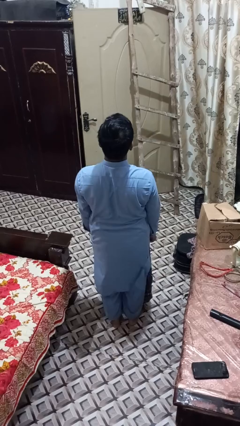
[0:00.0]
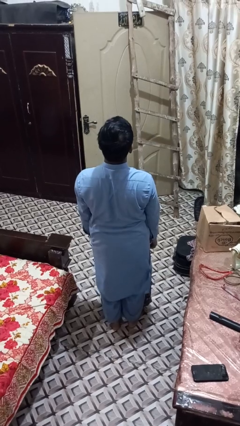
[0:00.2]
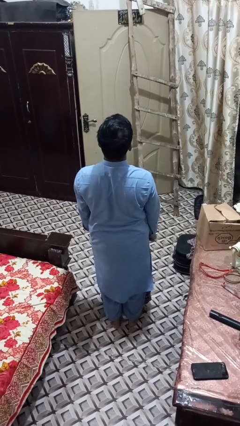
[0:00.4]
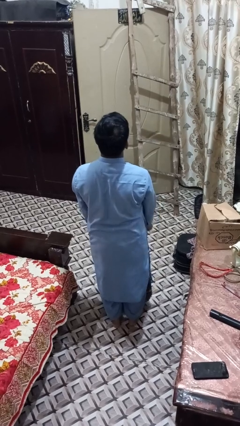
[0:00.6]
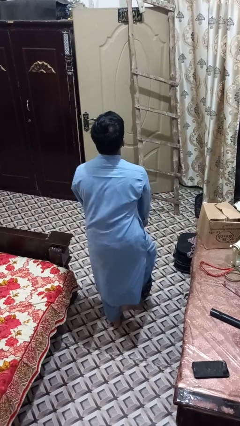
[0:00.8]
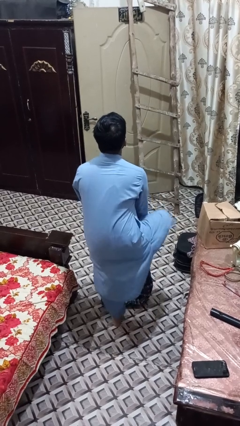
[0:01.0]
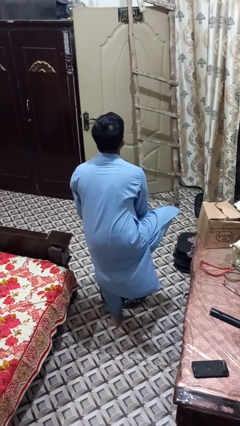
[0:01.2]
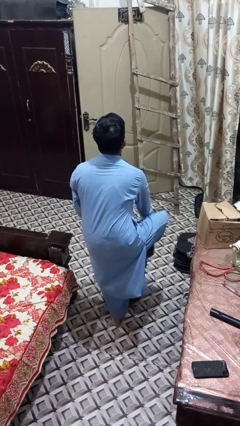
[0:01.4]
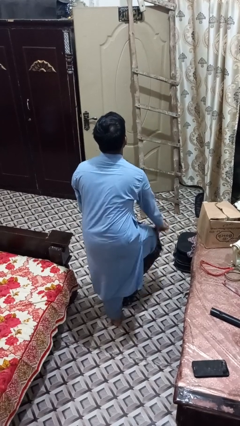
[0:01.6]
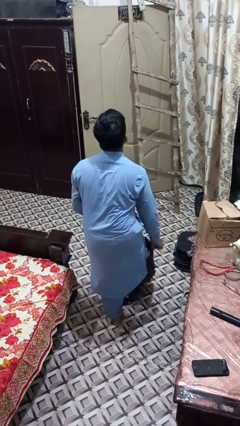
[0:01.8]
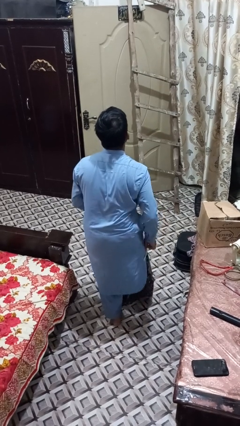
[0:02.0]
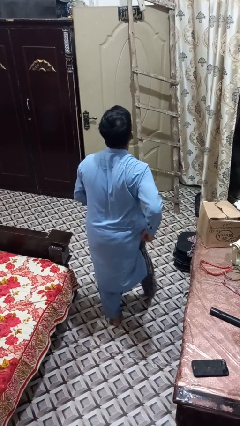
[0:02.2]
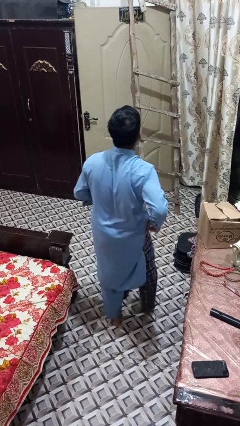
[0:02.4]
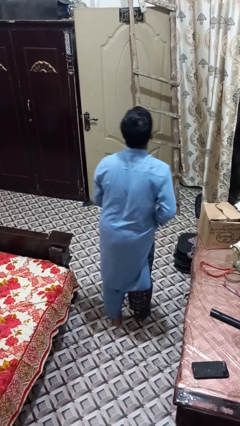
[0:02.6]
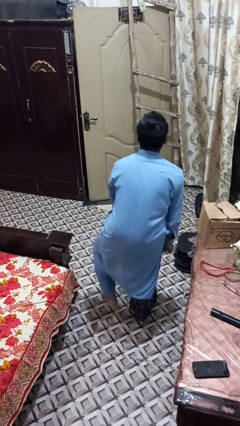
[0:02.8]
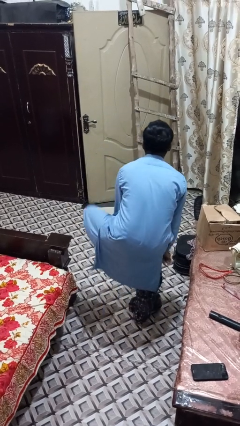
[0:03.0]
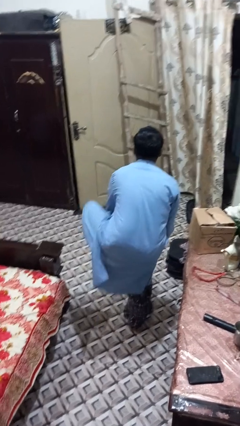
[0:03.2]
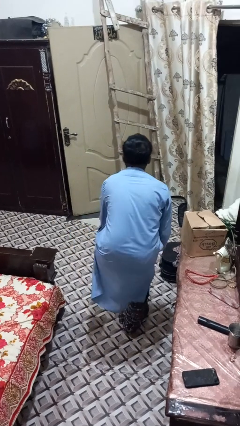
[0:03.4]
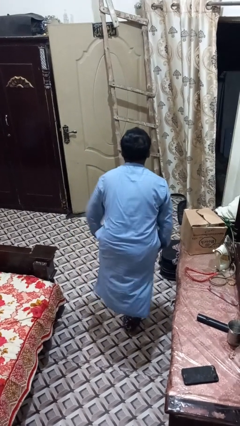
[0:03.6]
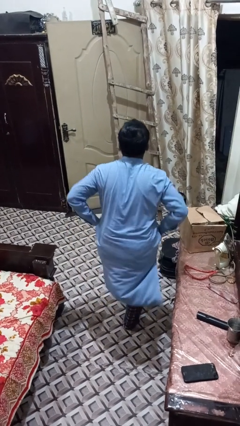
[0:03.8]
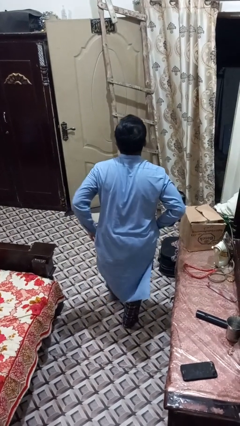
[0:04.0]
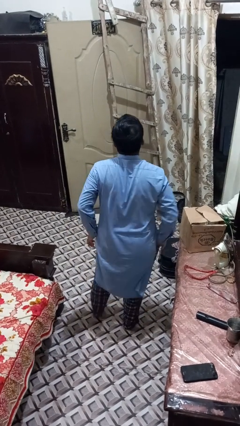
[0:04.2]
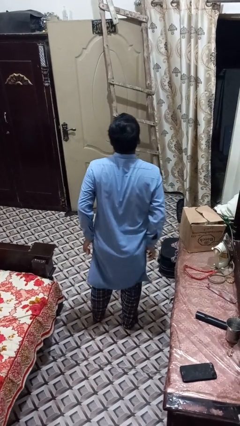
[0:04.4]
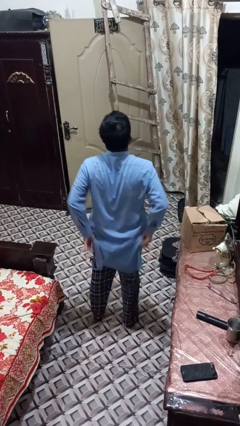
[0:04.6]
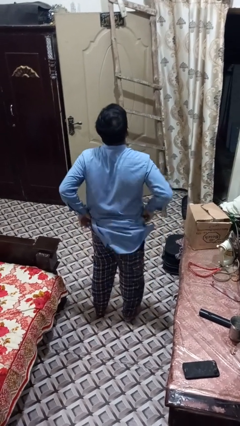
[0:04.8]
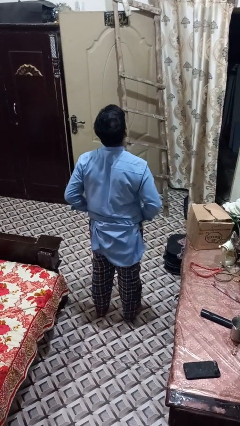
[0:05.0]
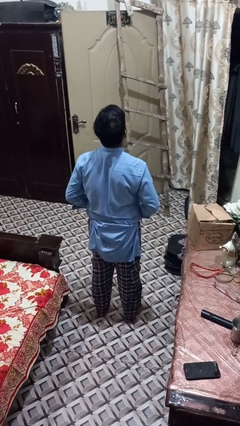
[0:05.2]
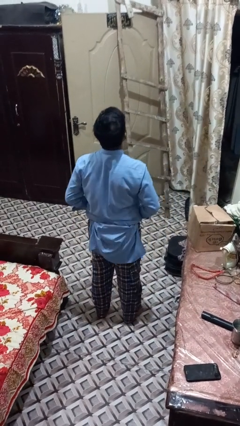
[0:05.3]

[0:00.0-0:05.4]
person puts on pants

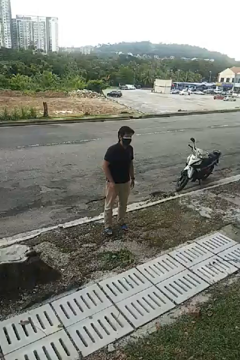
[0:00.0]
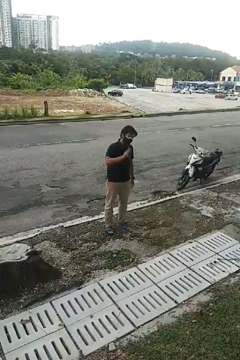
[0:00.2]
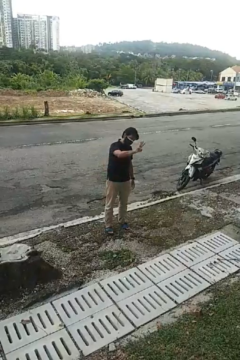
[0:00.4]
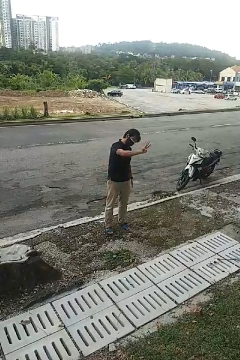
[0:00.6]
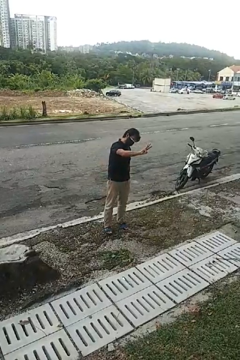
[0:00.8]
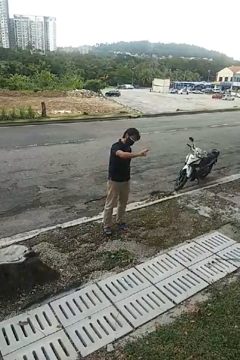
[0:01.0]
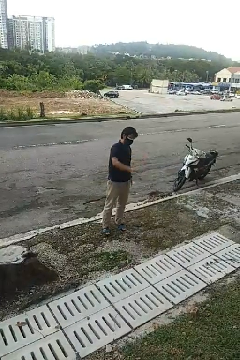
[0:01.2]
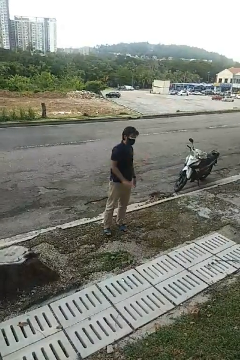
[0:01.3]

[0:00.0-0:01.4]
person gestures number three

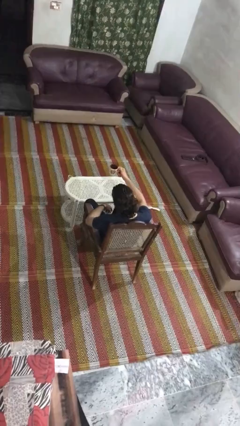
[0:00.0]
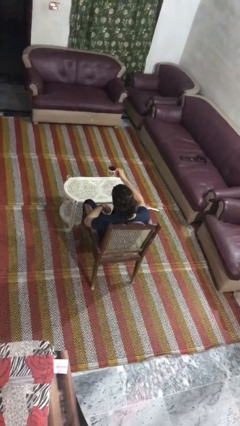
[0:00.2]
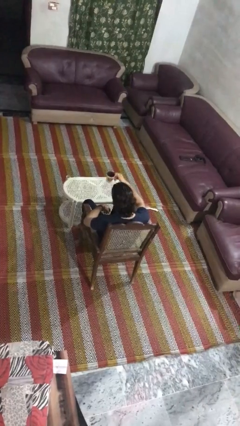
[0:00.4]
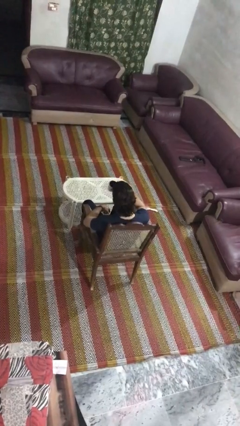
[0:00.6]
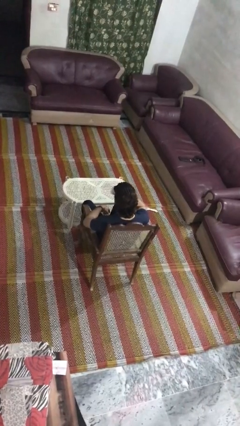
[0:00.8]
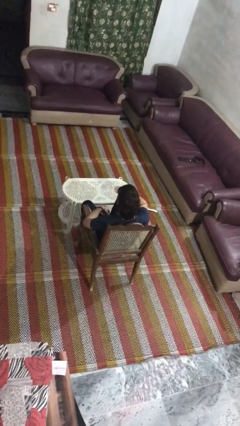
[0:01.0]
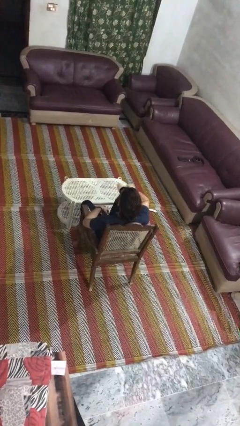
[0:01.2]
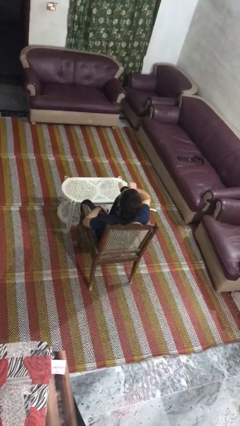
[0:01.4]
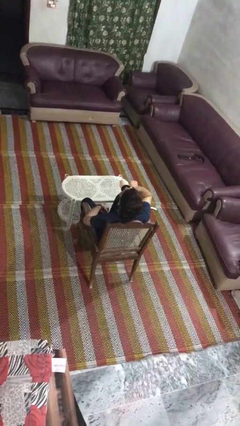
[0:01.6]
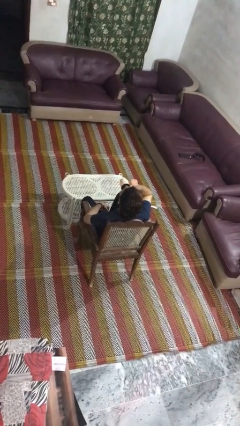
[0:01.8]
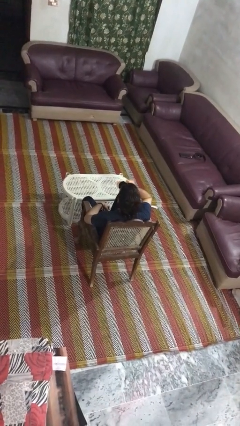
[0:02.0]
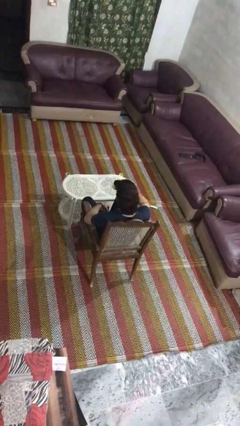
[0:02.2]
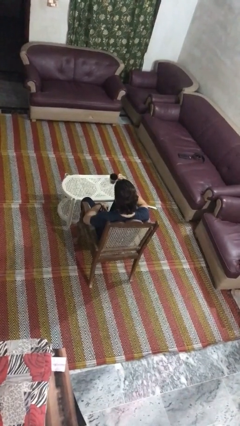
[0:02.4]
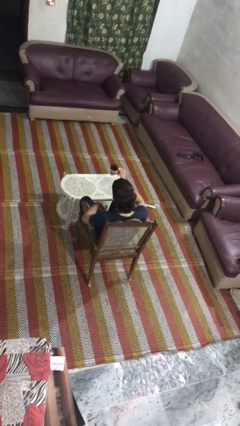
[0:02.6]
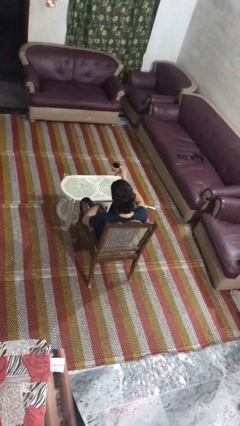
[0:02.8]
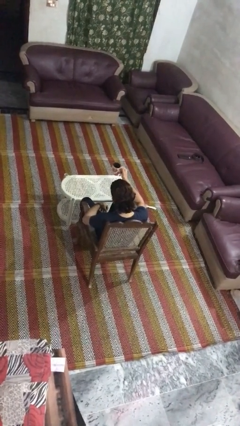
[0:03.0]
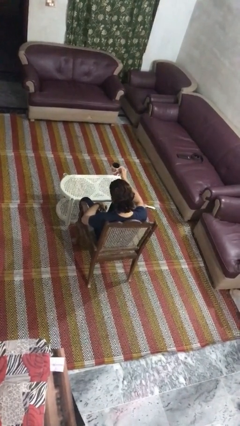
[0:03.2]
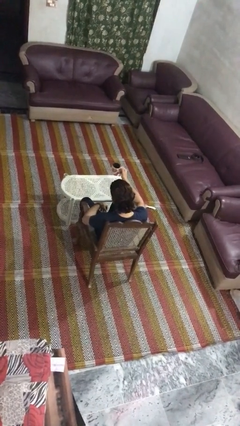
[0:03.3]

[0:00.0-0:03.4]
person drinks from mug

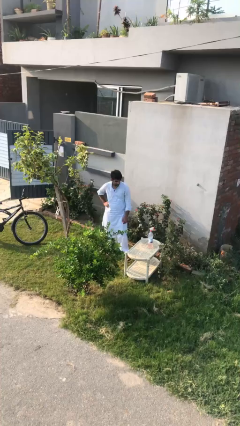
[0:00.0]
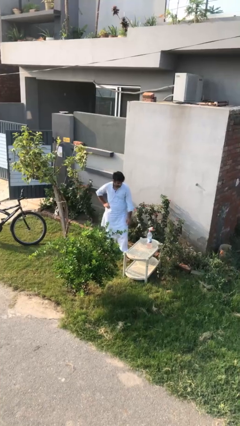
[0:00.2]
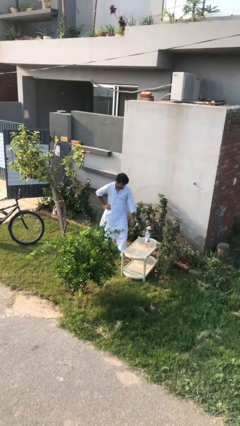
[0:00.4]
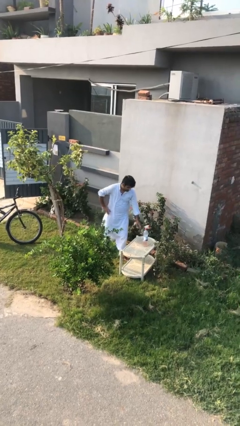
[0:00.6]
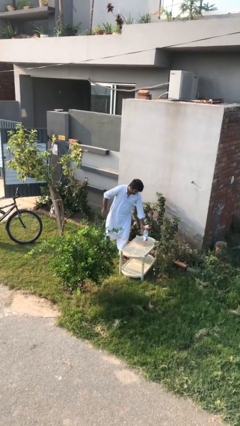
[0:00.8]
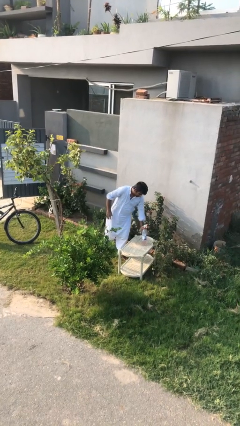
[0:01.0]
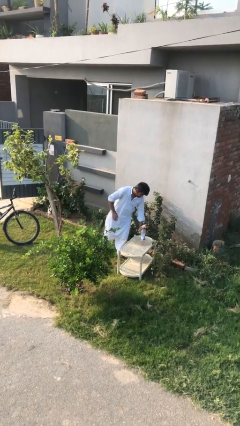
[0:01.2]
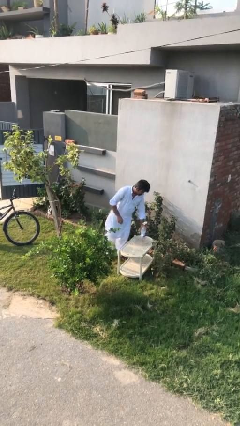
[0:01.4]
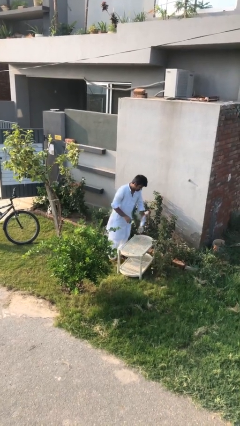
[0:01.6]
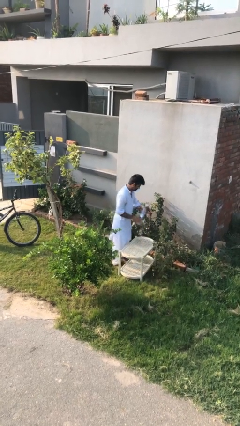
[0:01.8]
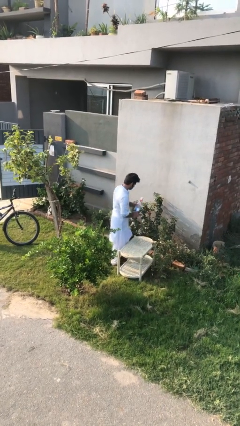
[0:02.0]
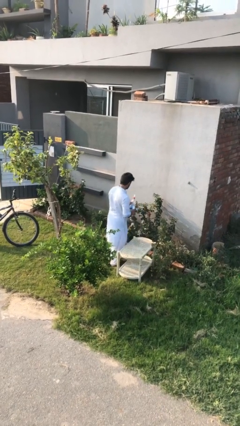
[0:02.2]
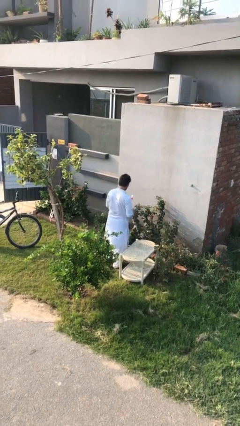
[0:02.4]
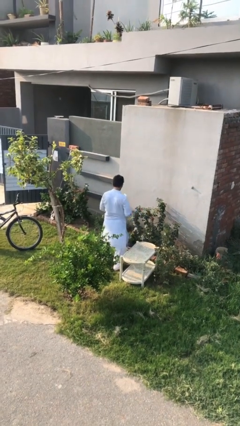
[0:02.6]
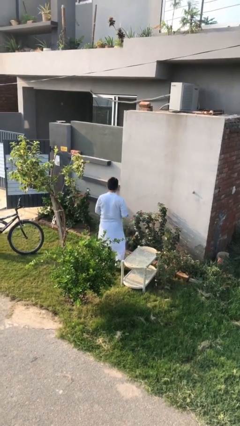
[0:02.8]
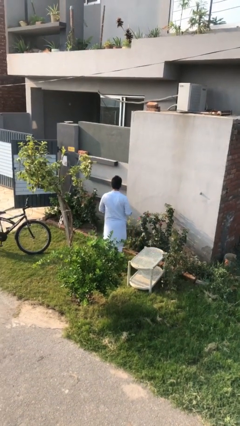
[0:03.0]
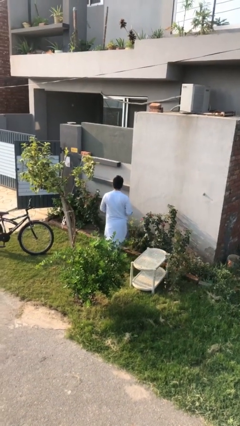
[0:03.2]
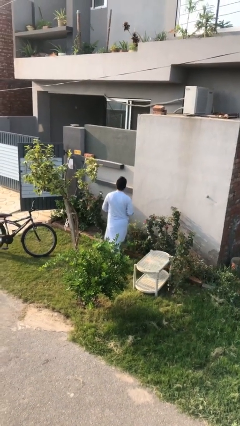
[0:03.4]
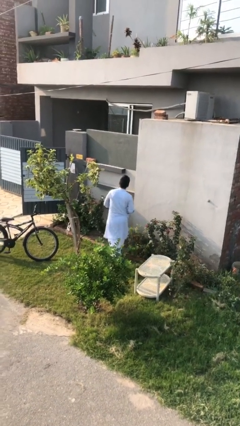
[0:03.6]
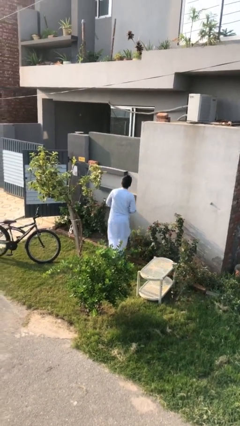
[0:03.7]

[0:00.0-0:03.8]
person picks up object from table

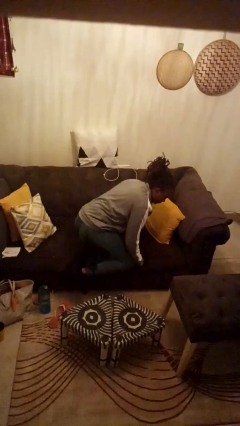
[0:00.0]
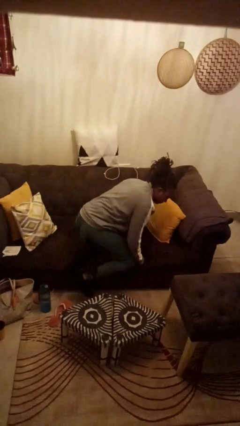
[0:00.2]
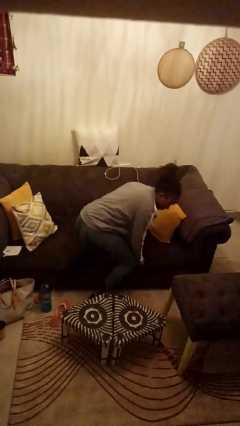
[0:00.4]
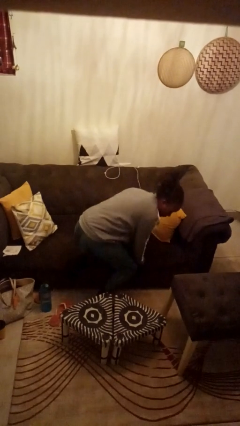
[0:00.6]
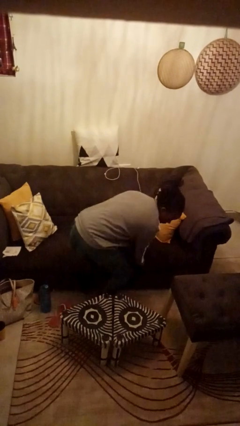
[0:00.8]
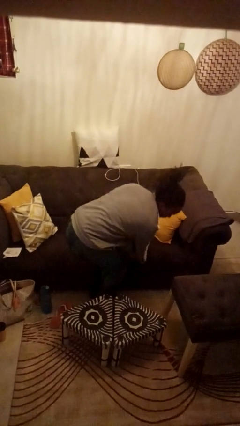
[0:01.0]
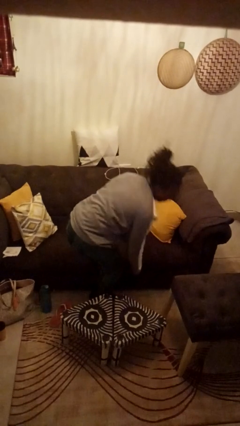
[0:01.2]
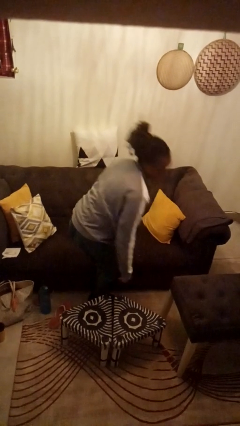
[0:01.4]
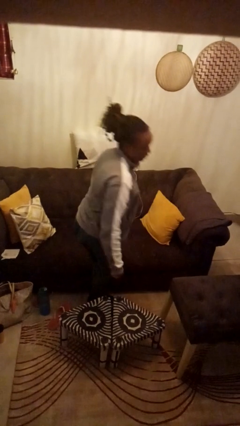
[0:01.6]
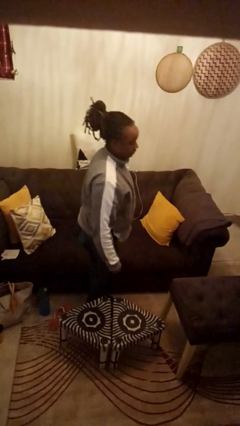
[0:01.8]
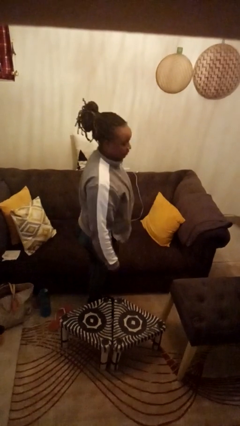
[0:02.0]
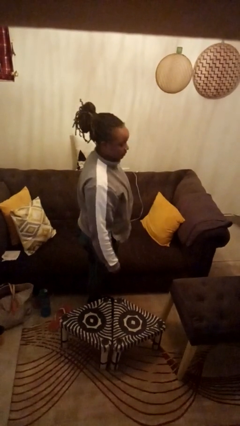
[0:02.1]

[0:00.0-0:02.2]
person climbs off couch

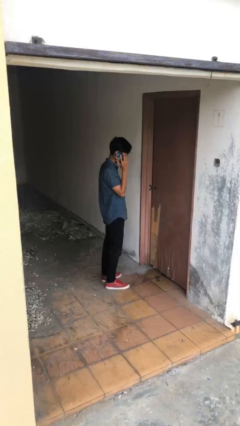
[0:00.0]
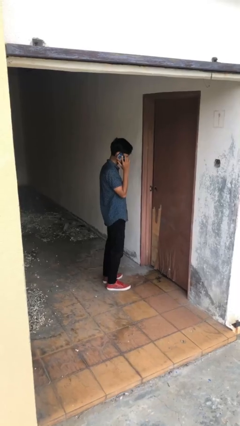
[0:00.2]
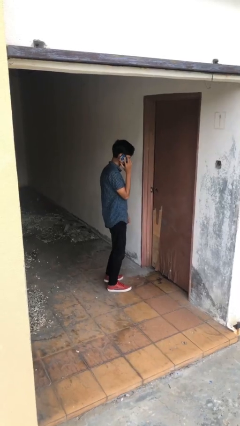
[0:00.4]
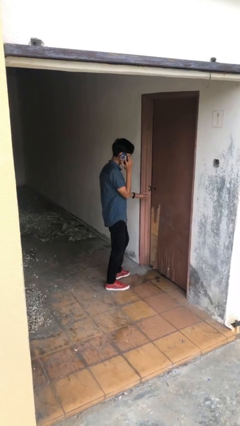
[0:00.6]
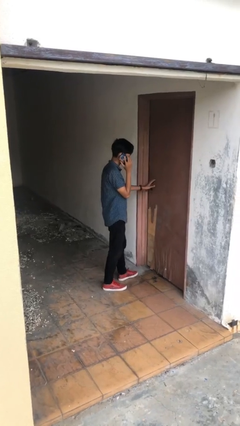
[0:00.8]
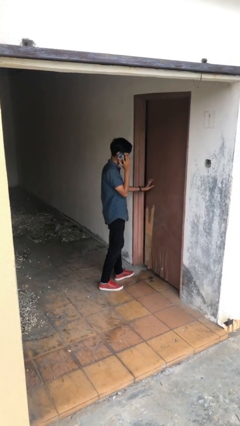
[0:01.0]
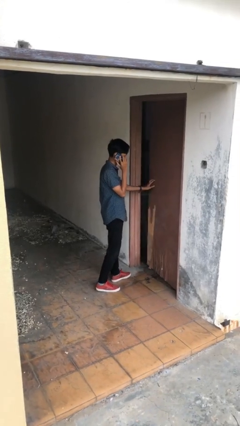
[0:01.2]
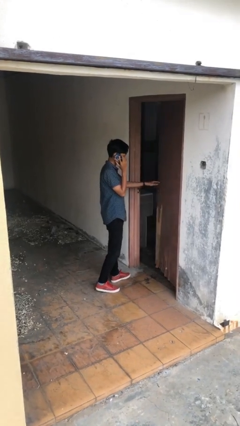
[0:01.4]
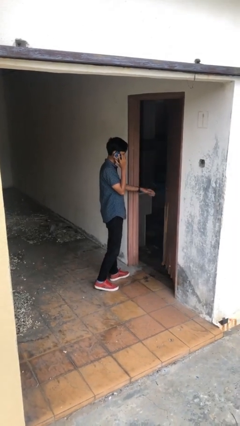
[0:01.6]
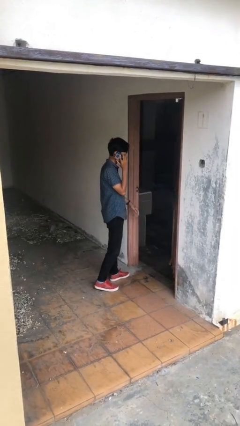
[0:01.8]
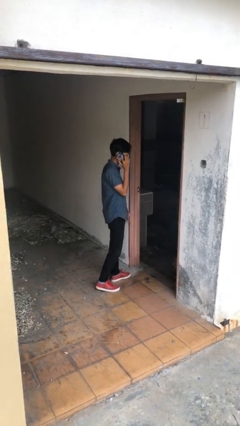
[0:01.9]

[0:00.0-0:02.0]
person opens facility door
